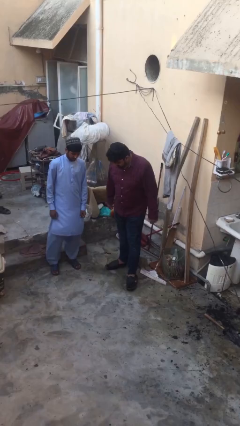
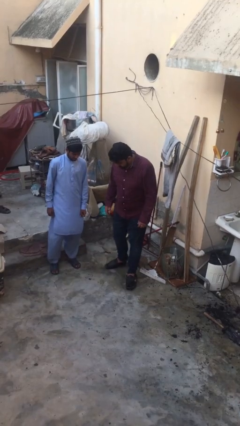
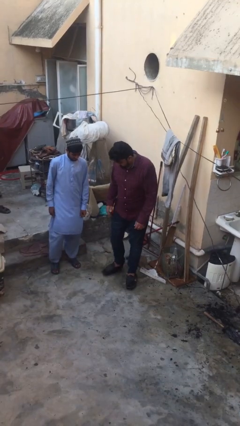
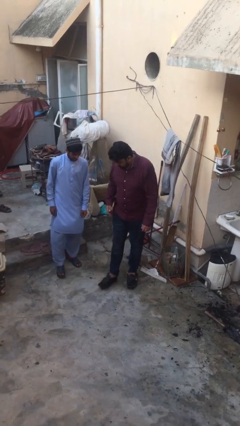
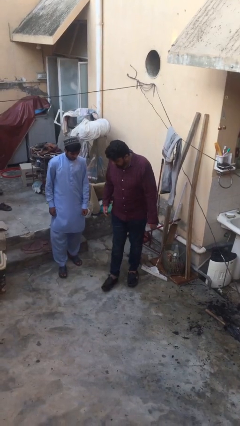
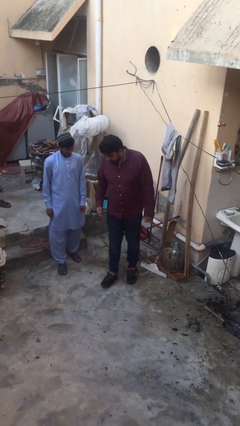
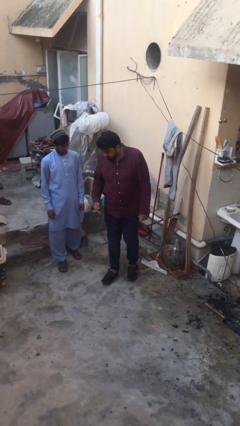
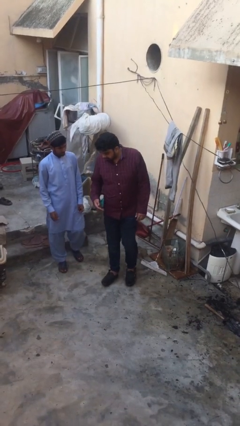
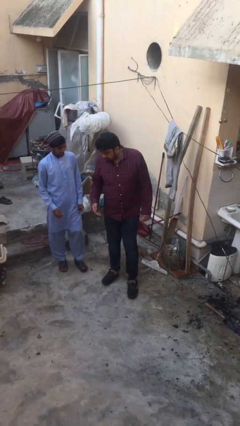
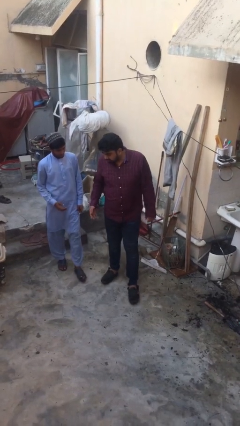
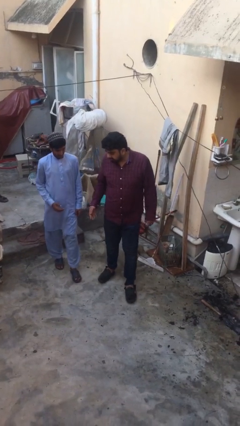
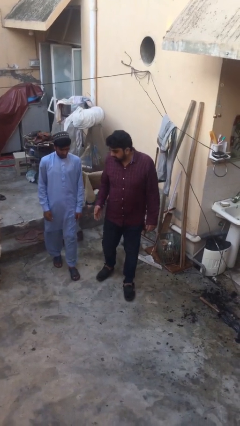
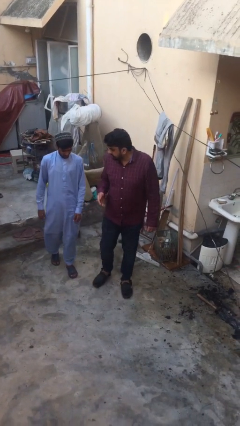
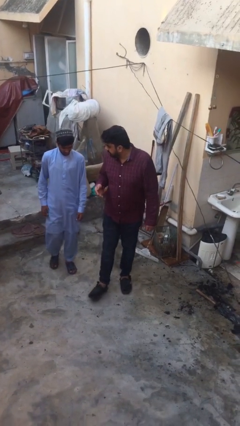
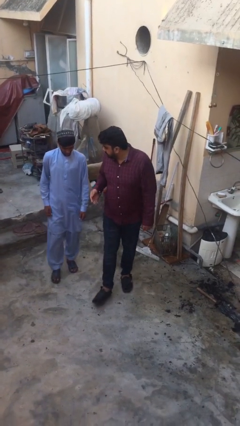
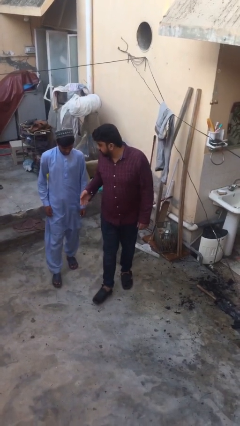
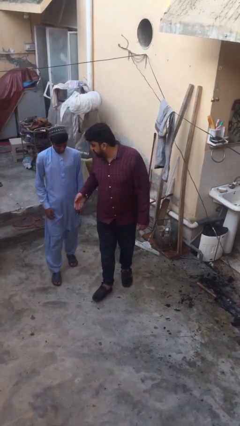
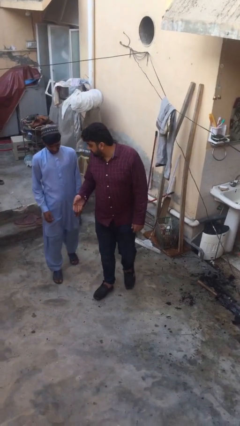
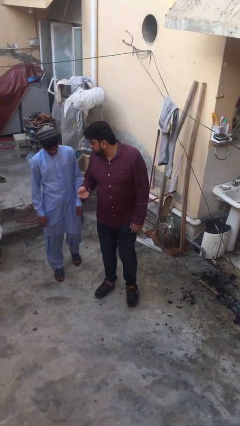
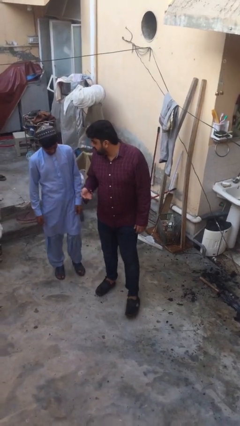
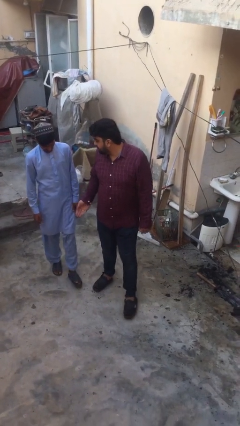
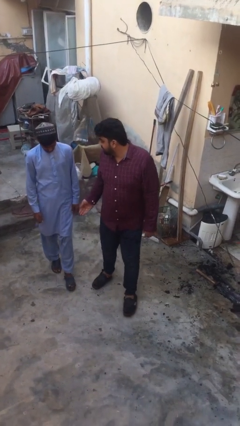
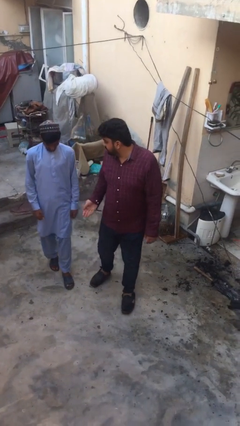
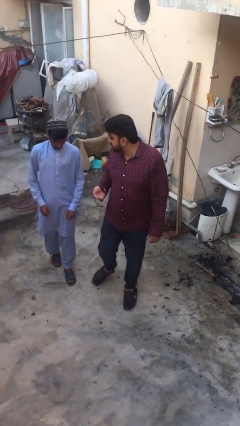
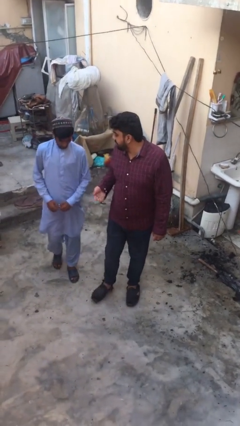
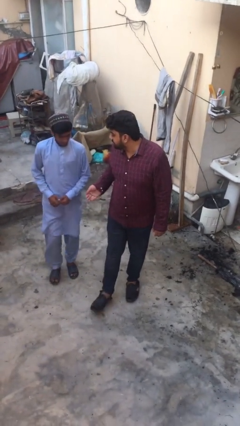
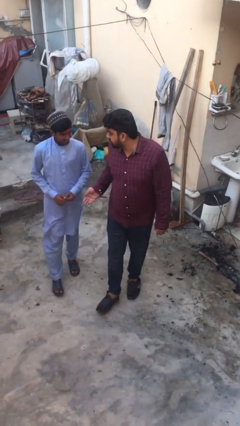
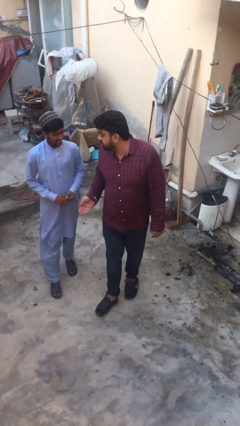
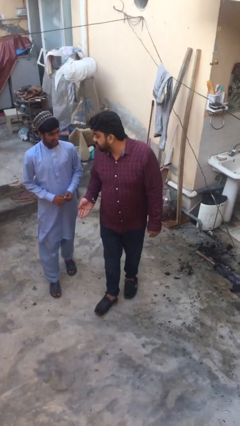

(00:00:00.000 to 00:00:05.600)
person talks to person

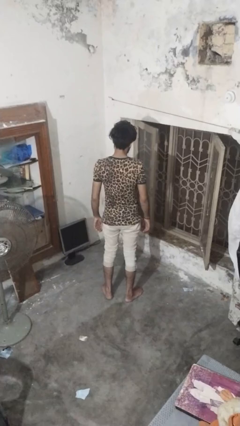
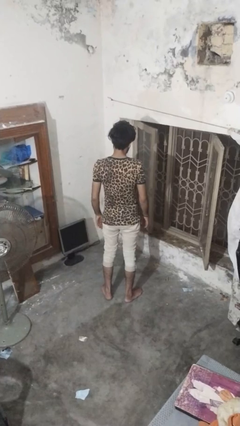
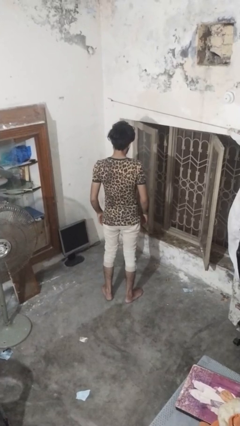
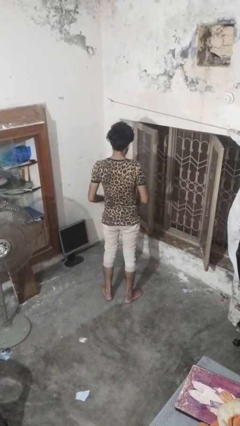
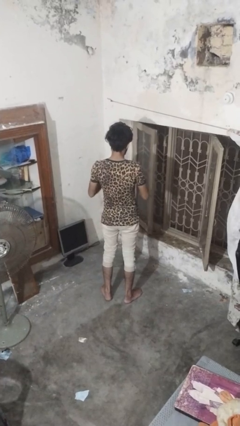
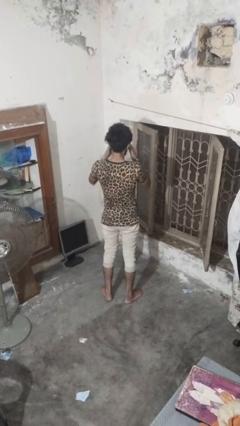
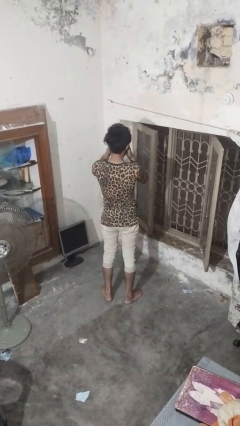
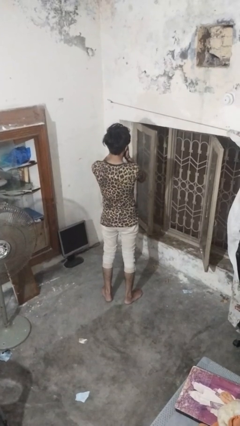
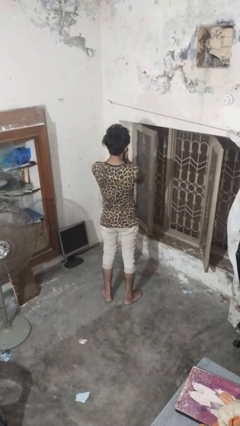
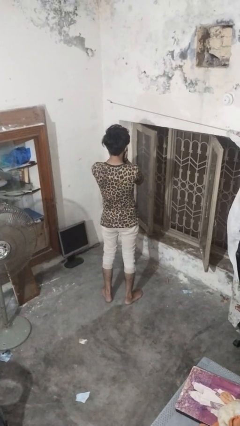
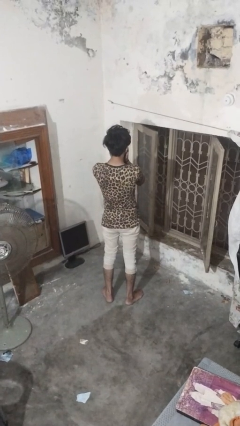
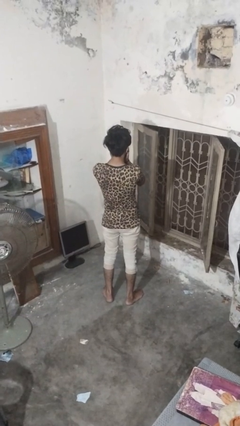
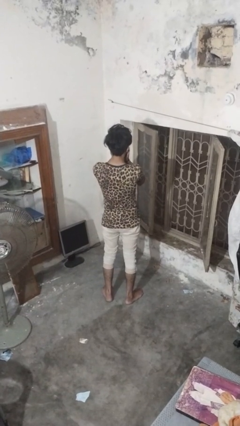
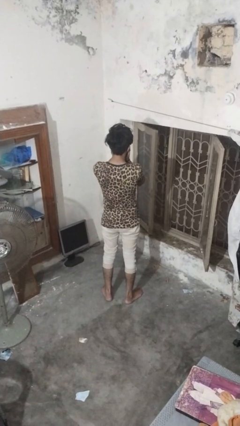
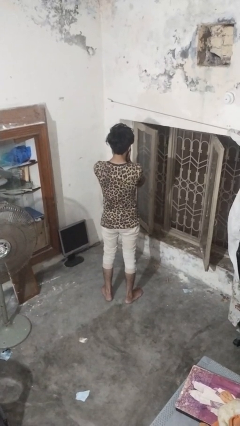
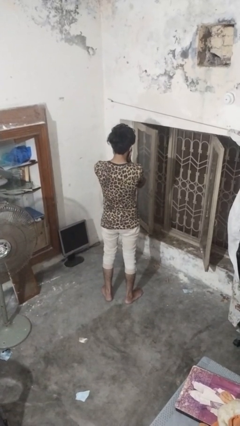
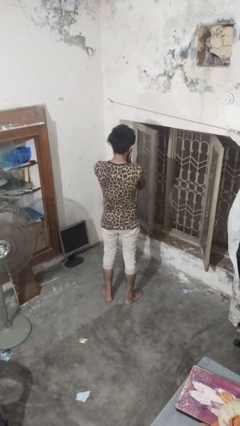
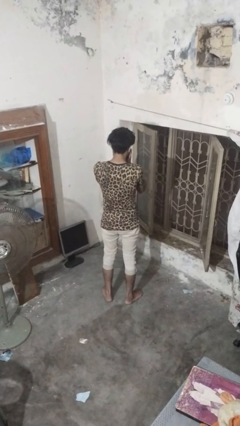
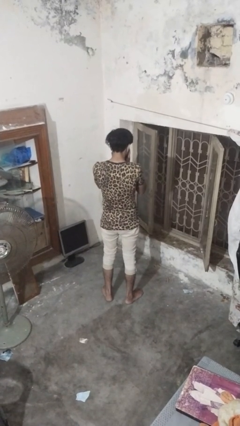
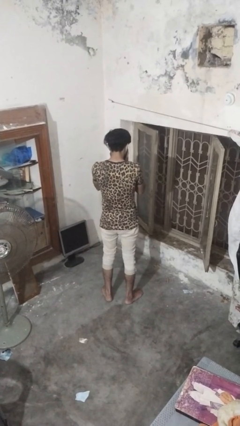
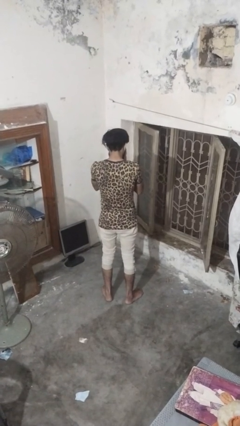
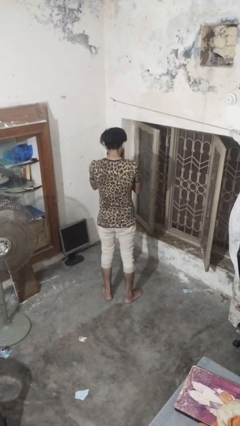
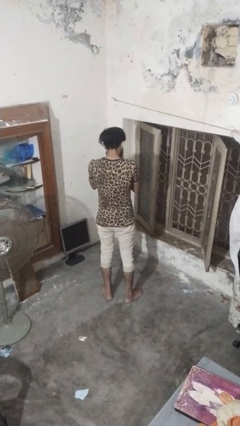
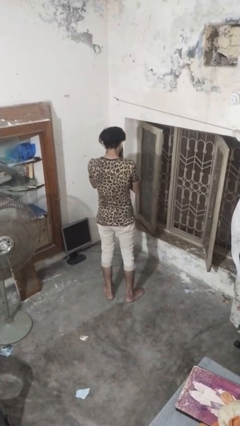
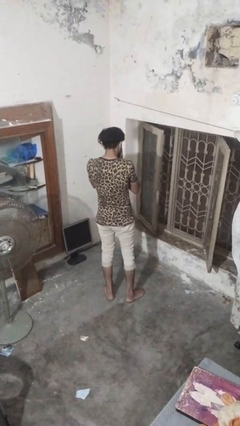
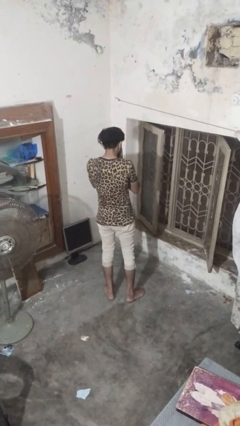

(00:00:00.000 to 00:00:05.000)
person covers face with hands

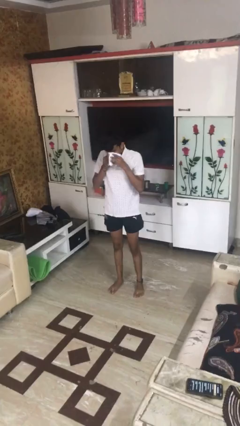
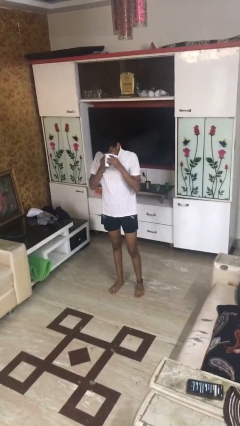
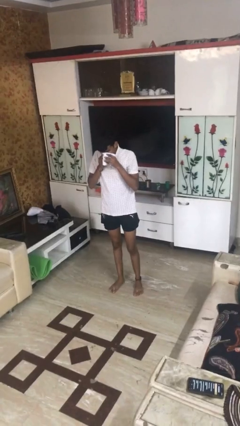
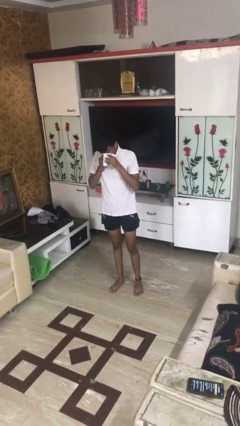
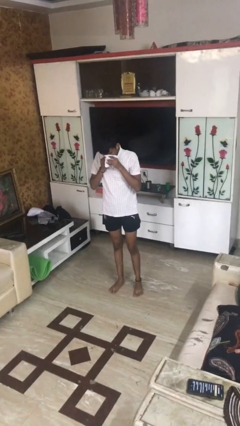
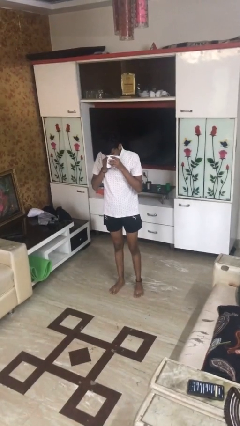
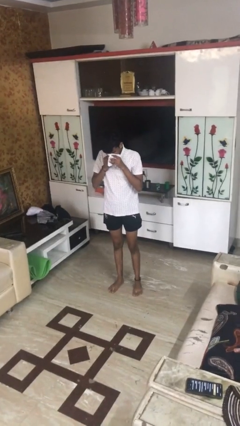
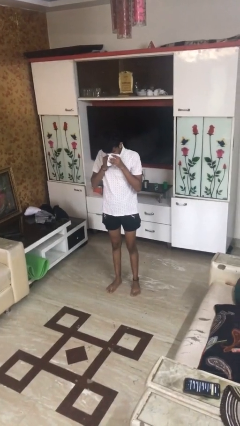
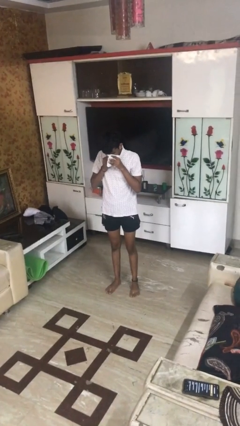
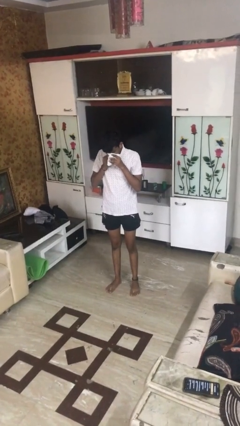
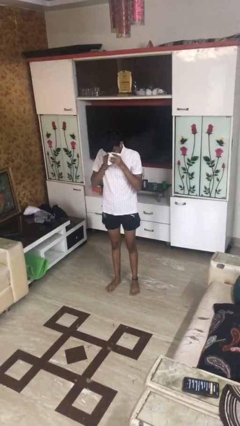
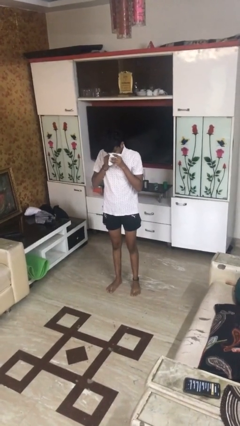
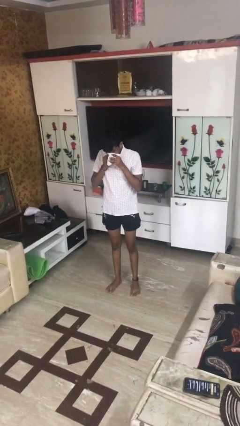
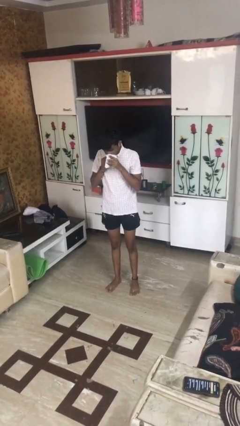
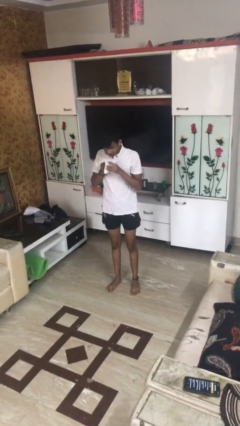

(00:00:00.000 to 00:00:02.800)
person blows nose

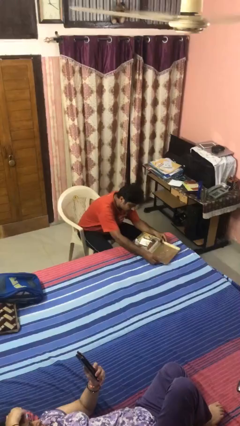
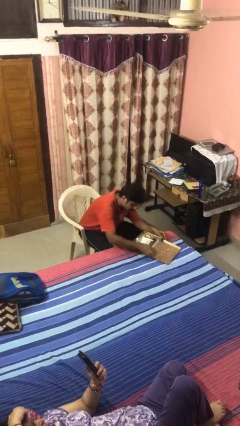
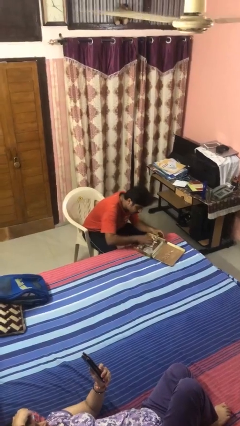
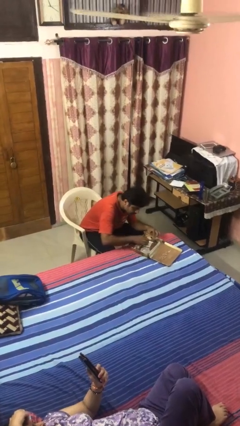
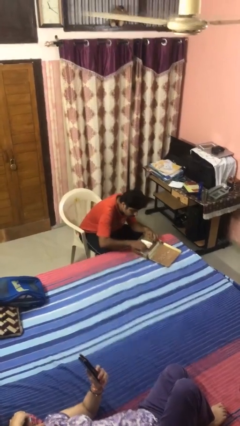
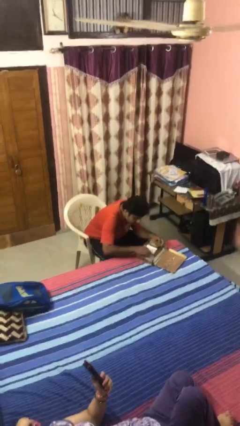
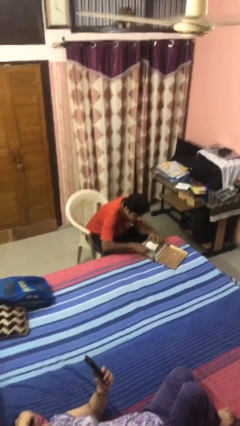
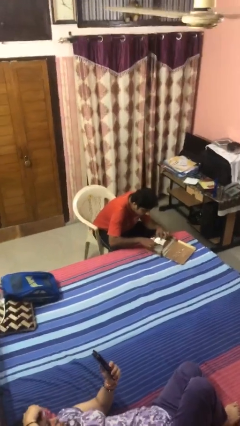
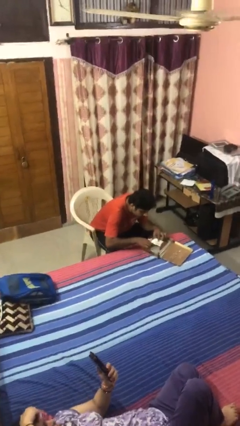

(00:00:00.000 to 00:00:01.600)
person searches jewelry box

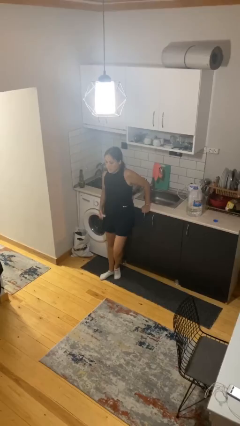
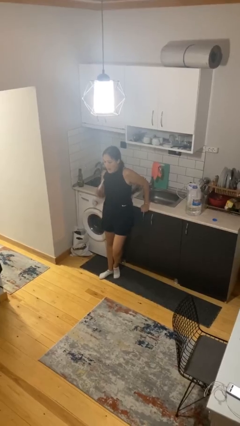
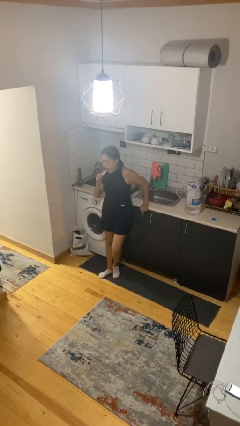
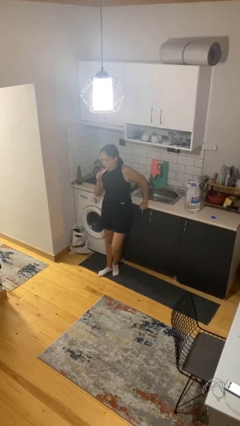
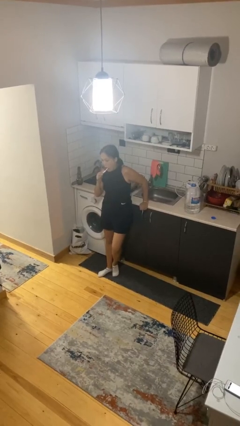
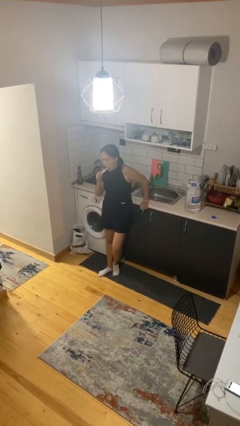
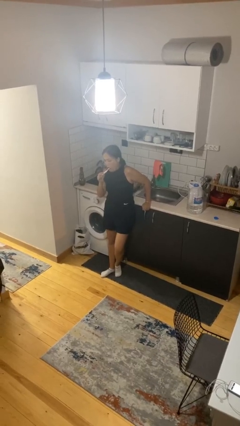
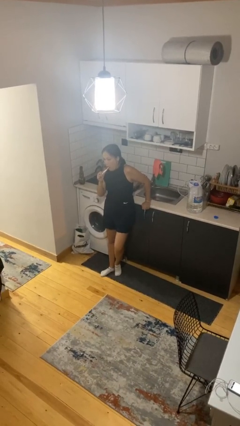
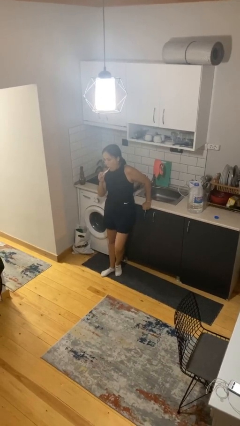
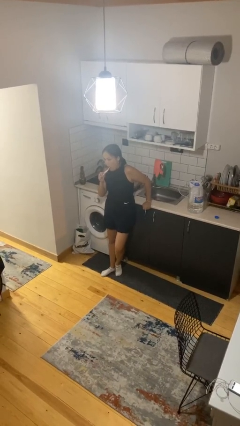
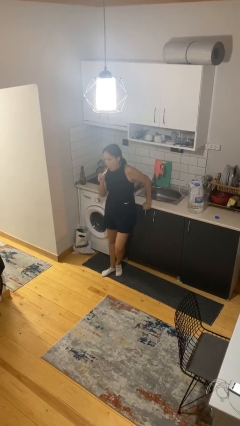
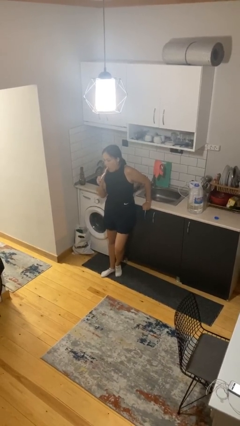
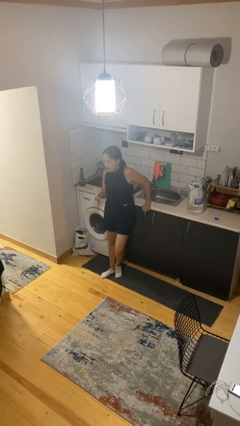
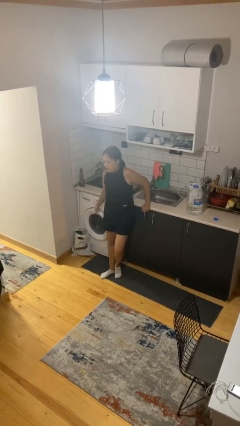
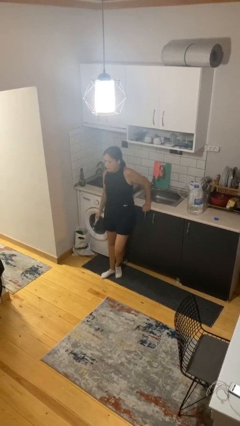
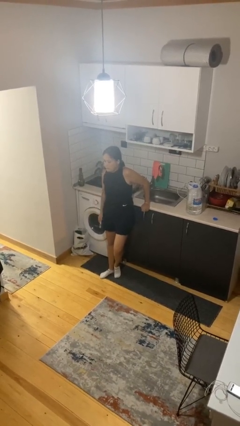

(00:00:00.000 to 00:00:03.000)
person brushes teeth
